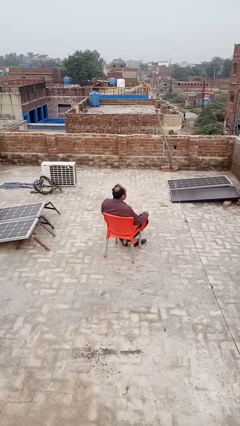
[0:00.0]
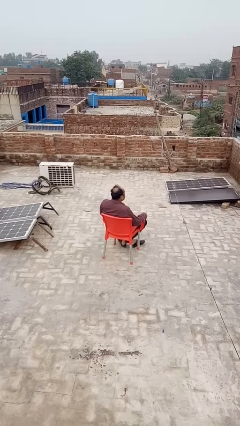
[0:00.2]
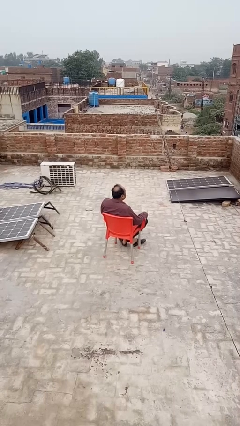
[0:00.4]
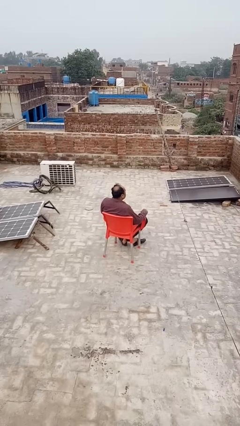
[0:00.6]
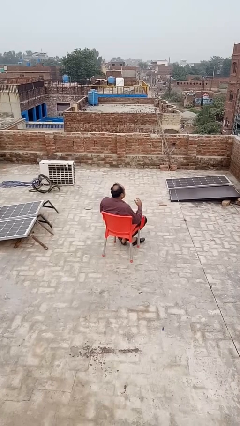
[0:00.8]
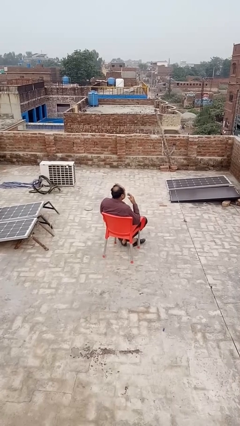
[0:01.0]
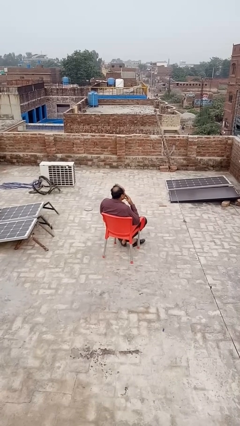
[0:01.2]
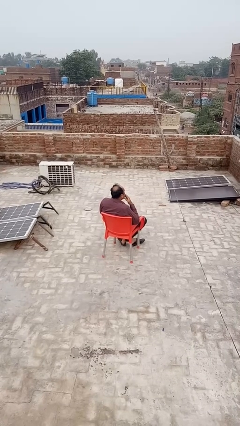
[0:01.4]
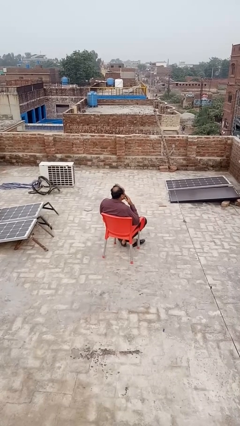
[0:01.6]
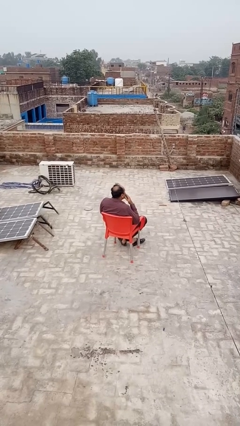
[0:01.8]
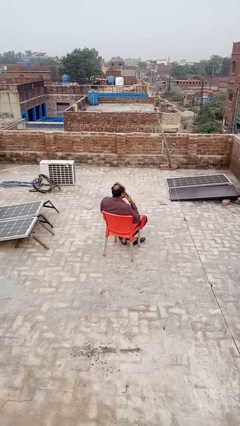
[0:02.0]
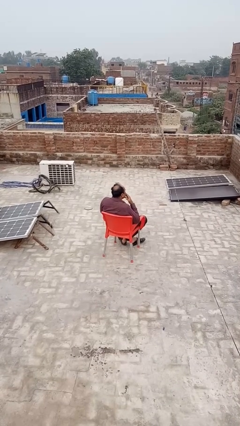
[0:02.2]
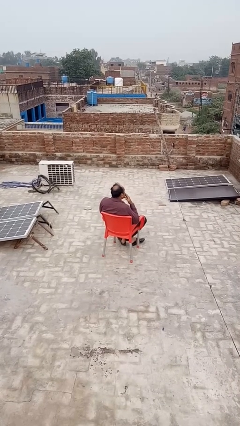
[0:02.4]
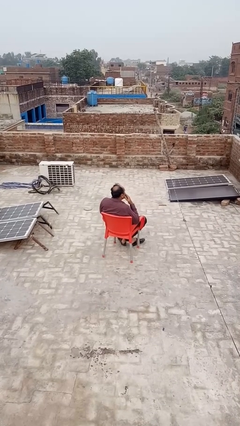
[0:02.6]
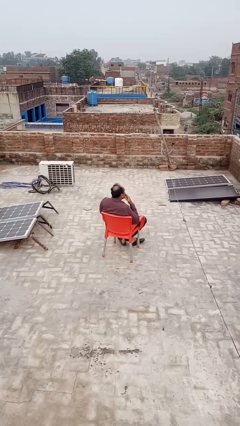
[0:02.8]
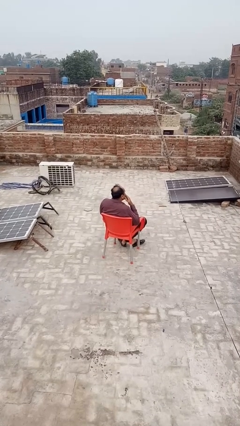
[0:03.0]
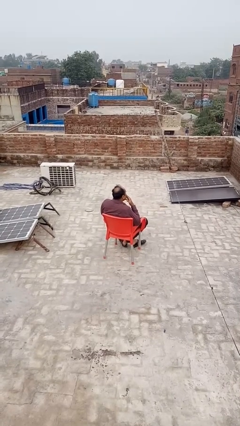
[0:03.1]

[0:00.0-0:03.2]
person vapes

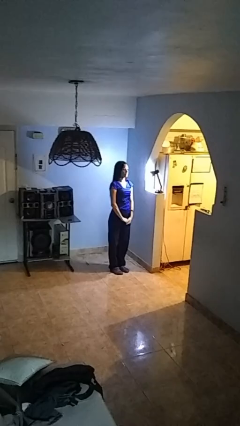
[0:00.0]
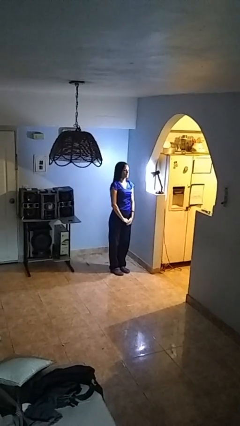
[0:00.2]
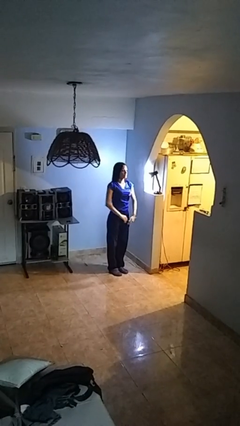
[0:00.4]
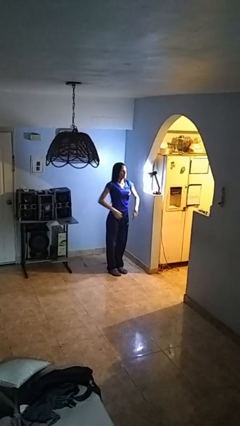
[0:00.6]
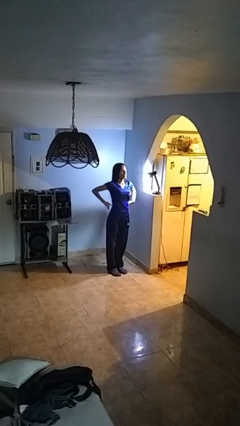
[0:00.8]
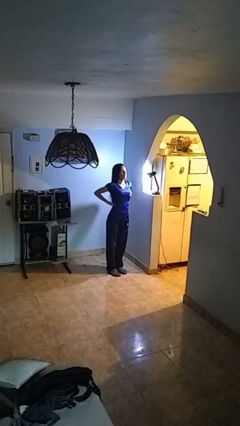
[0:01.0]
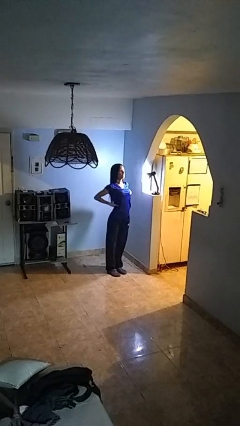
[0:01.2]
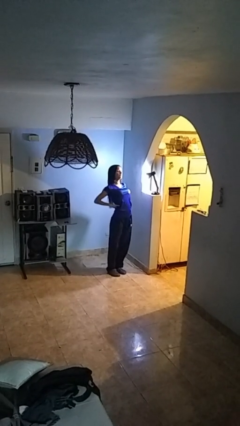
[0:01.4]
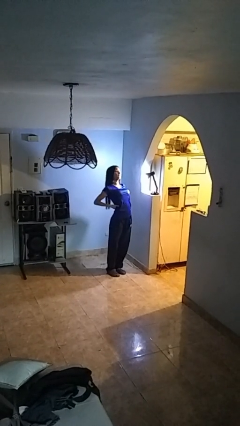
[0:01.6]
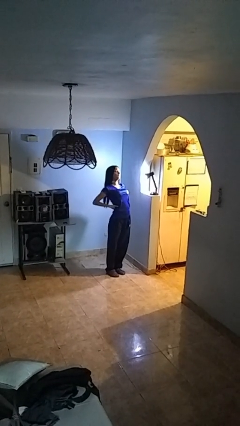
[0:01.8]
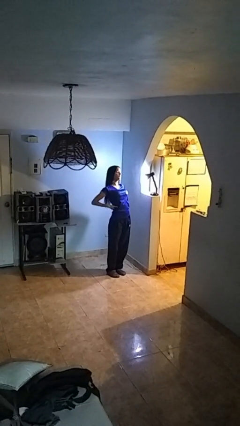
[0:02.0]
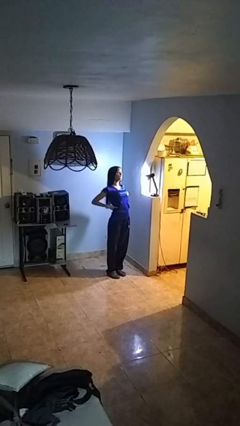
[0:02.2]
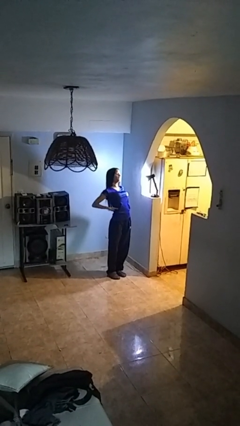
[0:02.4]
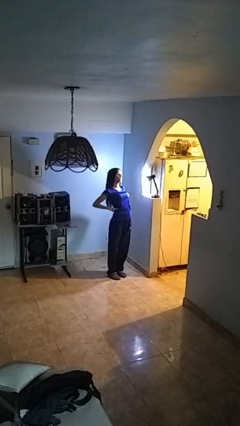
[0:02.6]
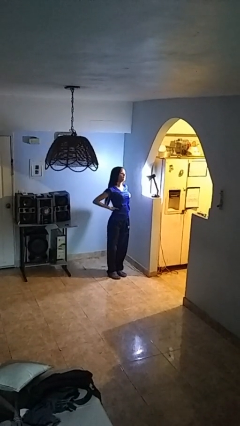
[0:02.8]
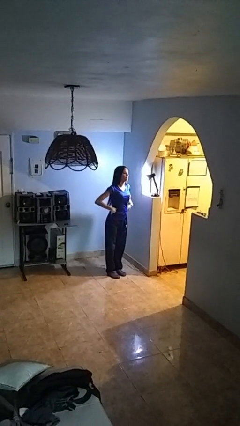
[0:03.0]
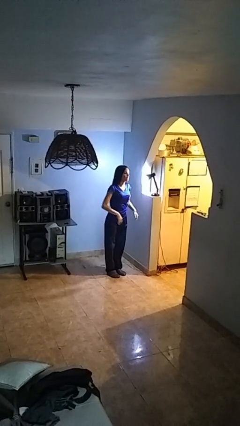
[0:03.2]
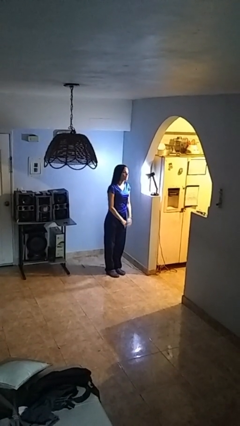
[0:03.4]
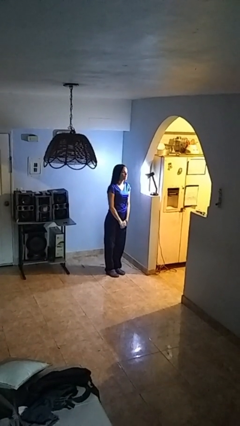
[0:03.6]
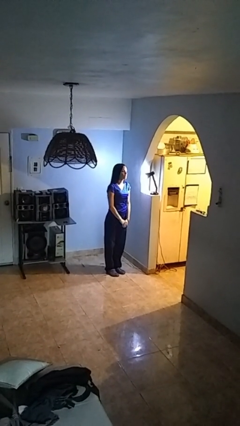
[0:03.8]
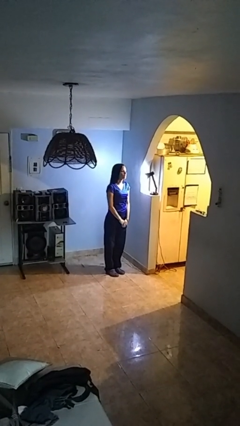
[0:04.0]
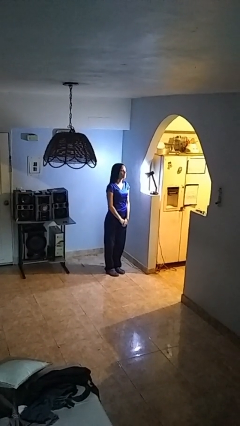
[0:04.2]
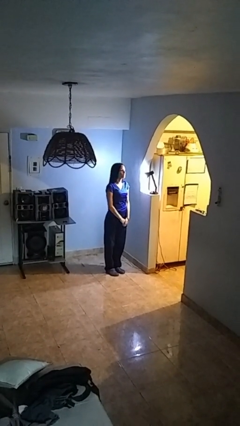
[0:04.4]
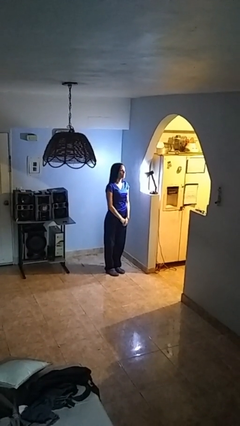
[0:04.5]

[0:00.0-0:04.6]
person stretches back

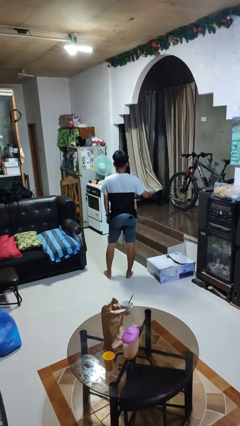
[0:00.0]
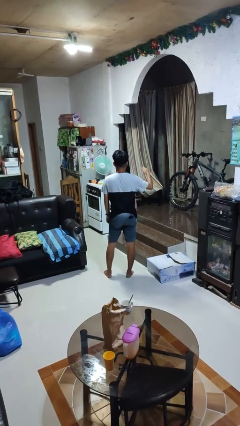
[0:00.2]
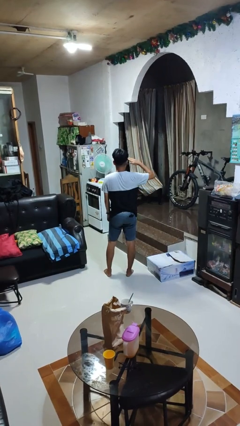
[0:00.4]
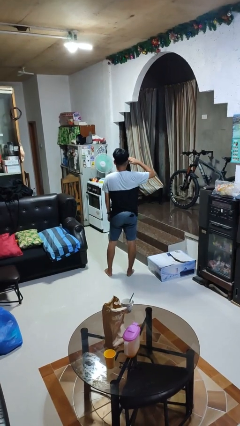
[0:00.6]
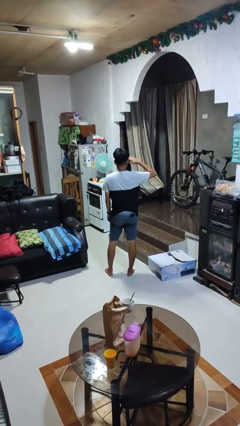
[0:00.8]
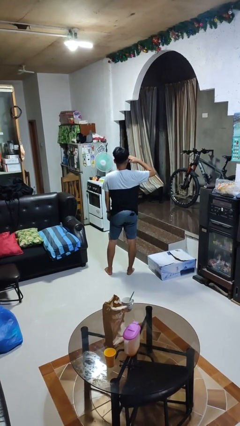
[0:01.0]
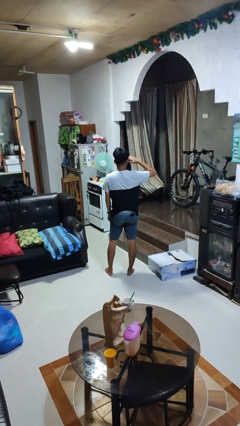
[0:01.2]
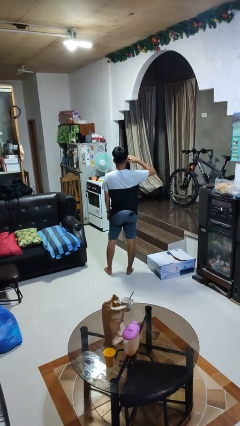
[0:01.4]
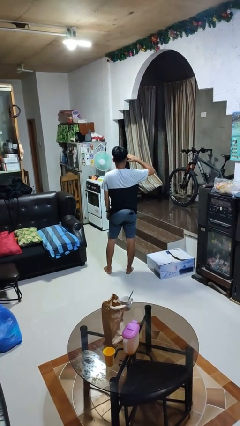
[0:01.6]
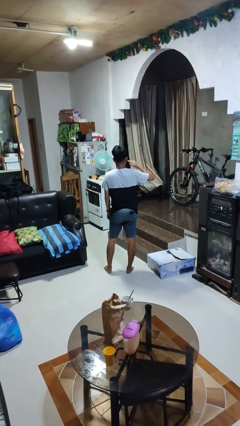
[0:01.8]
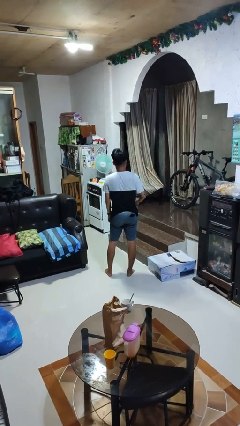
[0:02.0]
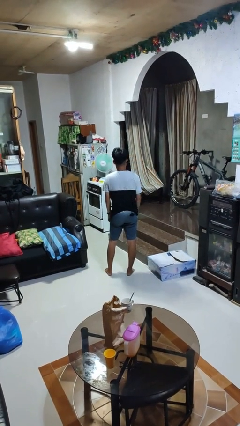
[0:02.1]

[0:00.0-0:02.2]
person salutes

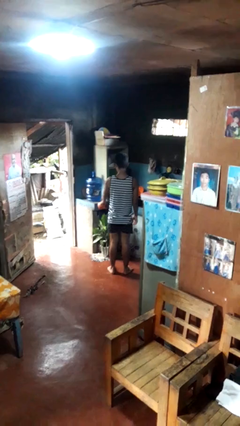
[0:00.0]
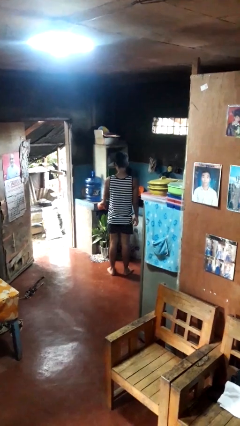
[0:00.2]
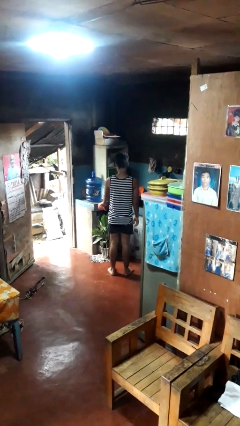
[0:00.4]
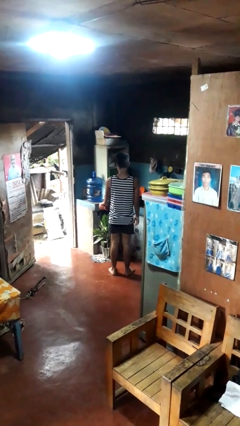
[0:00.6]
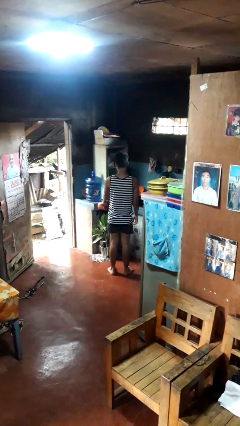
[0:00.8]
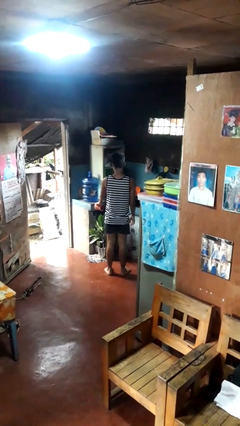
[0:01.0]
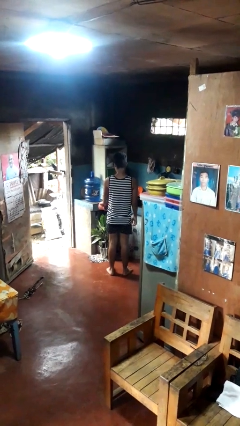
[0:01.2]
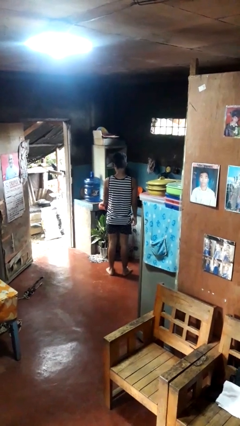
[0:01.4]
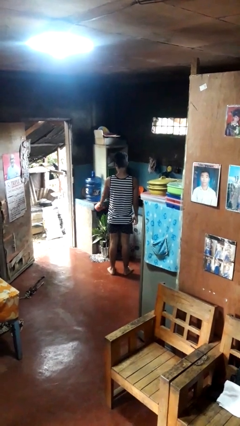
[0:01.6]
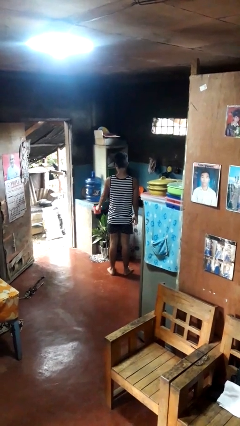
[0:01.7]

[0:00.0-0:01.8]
person waters houseplant

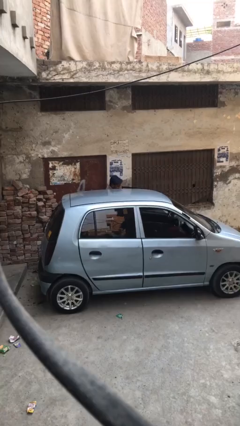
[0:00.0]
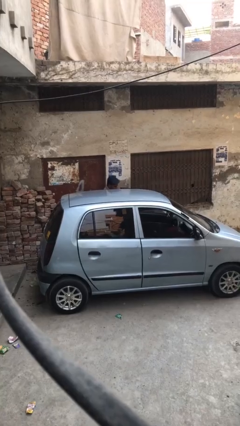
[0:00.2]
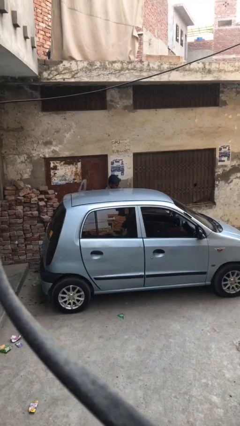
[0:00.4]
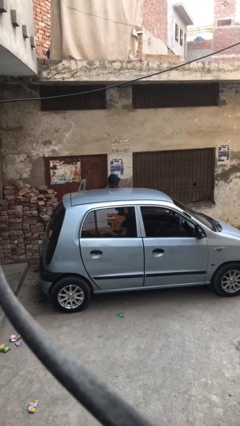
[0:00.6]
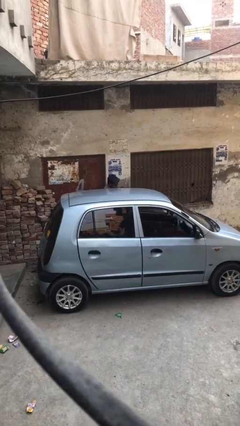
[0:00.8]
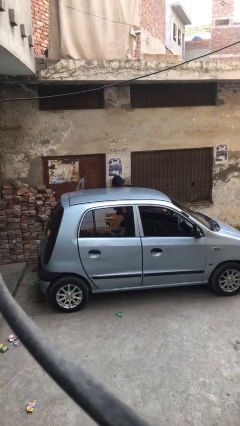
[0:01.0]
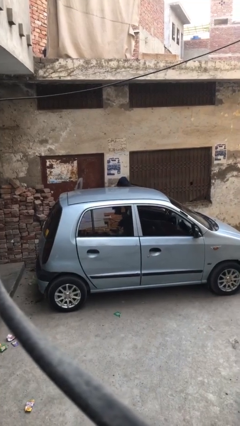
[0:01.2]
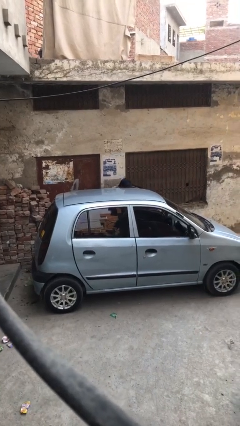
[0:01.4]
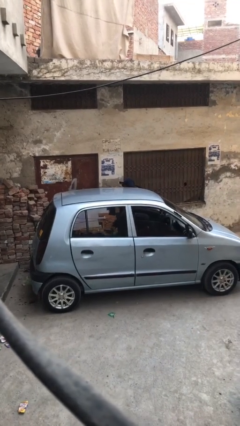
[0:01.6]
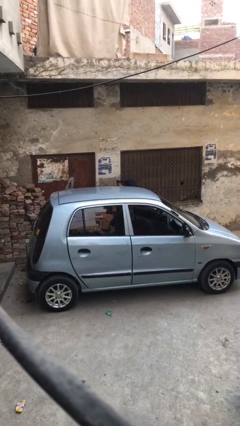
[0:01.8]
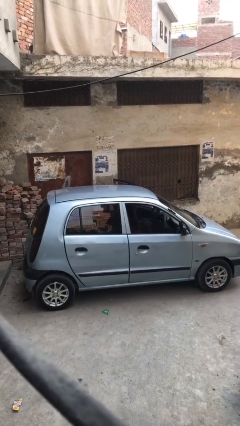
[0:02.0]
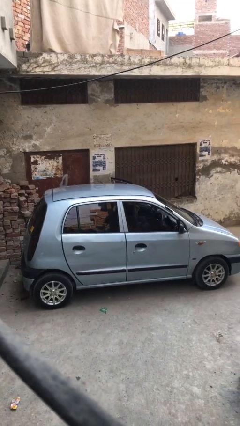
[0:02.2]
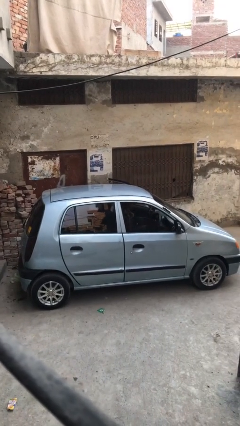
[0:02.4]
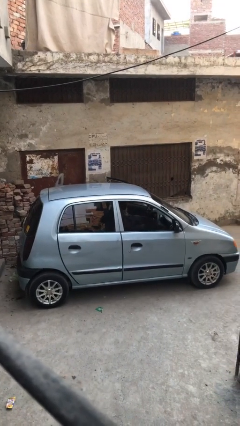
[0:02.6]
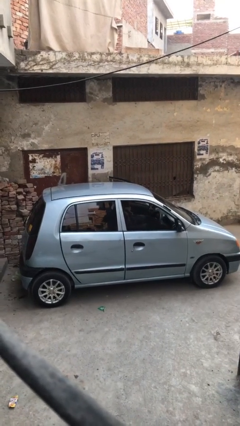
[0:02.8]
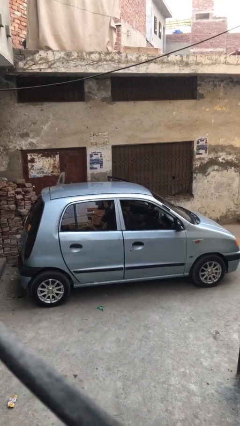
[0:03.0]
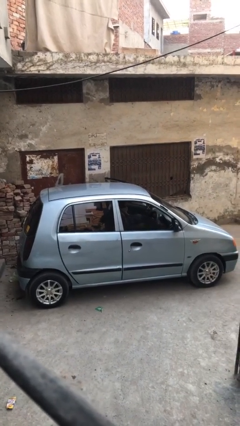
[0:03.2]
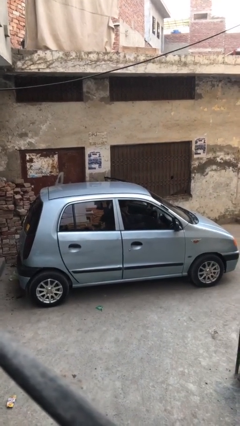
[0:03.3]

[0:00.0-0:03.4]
person enters car

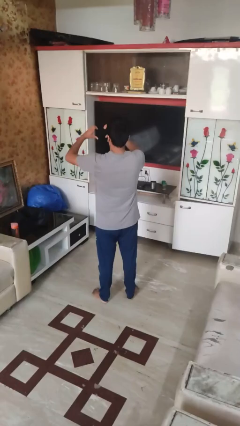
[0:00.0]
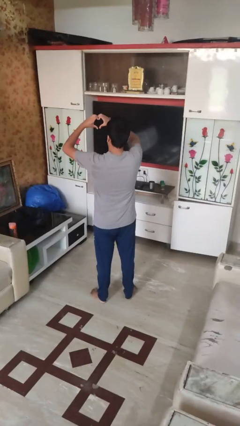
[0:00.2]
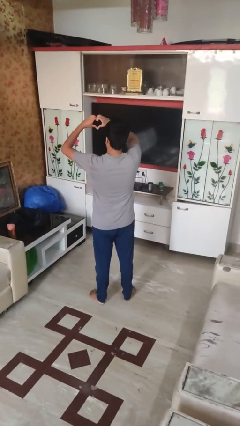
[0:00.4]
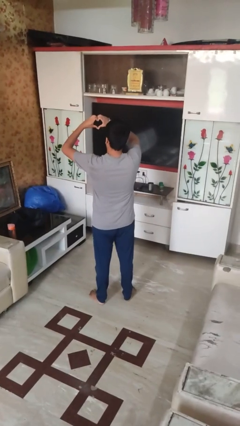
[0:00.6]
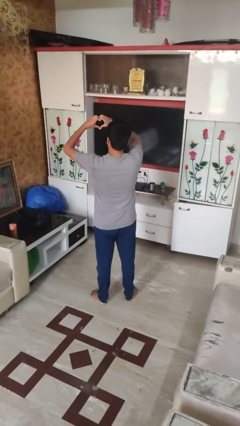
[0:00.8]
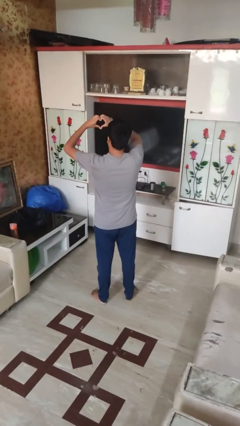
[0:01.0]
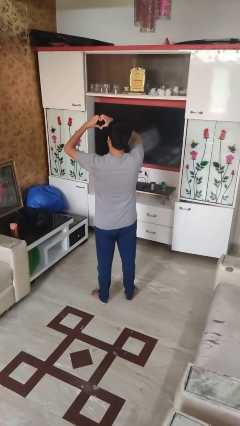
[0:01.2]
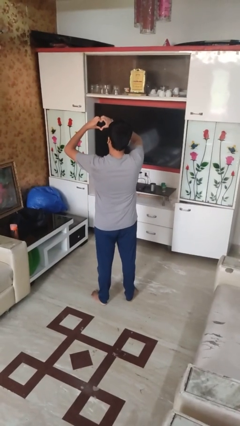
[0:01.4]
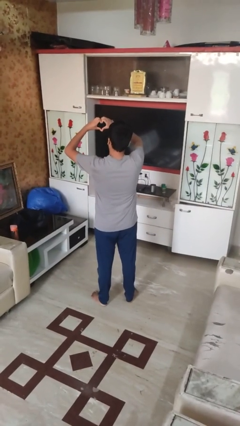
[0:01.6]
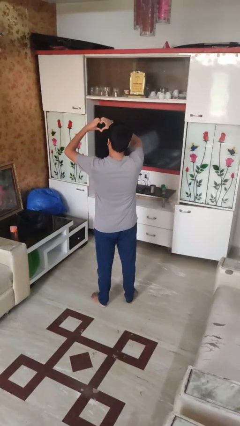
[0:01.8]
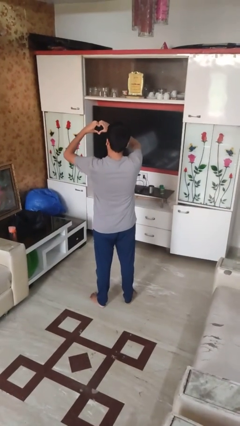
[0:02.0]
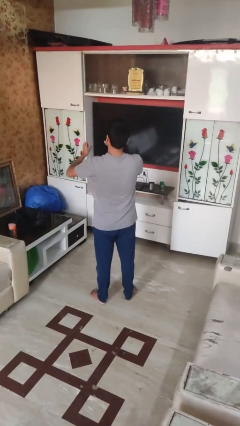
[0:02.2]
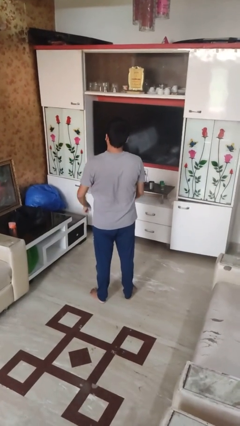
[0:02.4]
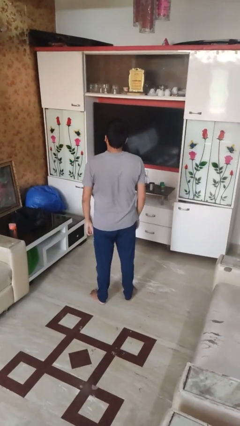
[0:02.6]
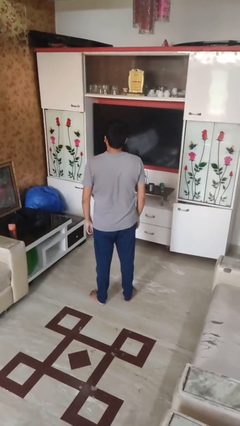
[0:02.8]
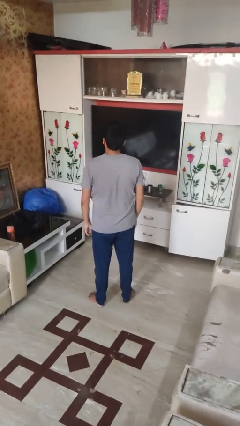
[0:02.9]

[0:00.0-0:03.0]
person gestures heart
